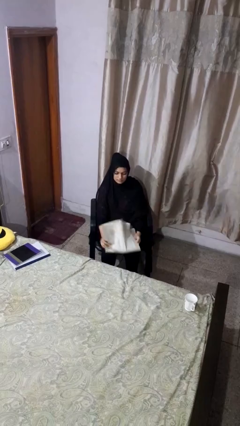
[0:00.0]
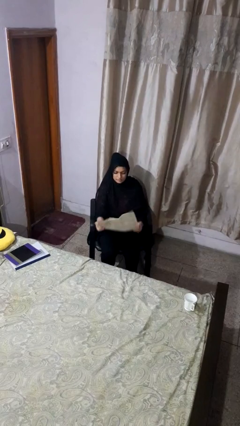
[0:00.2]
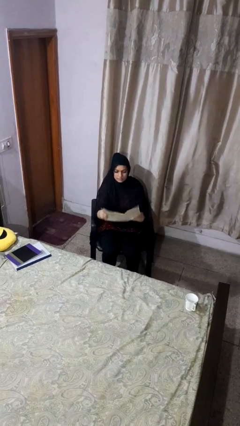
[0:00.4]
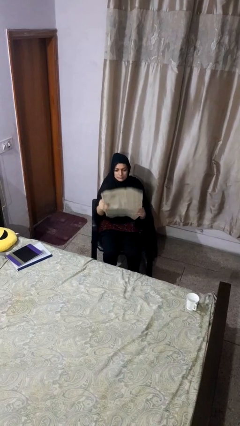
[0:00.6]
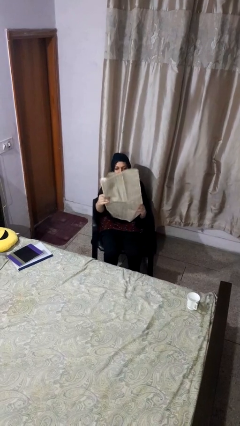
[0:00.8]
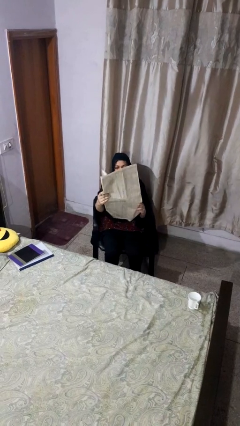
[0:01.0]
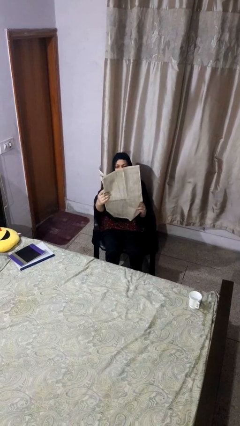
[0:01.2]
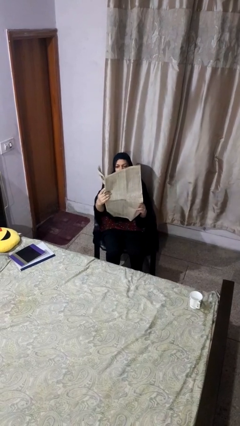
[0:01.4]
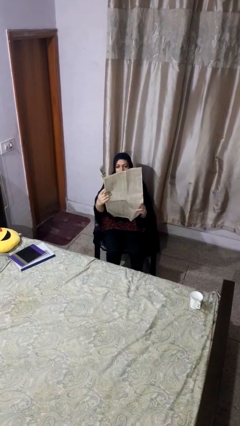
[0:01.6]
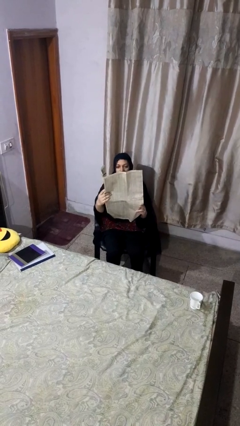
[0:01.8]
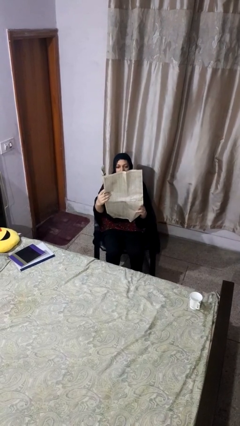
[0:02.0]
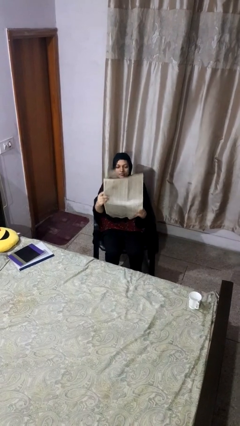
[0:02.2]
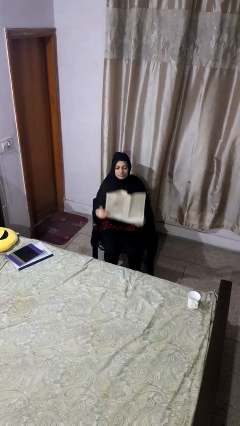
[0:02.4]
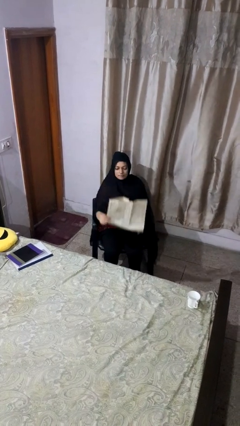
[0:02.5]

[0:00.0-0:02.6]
person reads newspaper

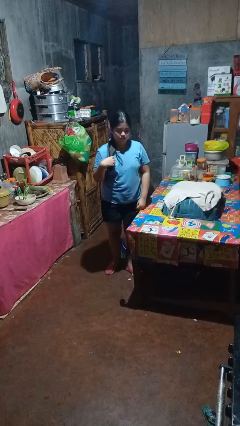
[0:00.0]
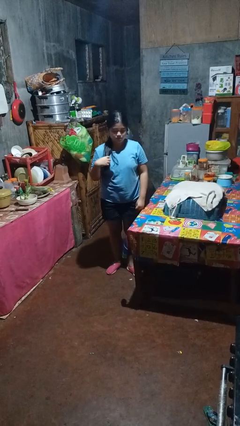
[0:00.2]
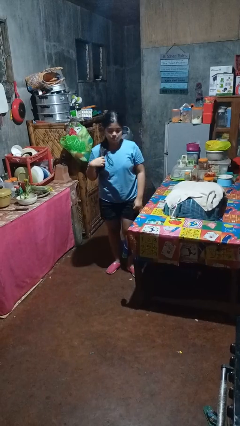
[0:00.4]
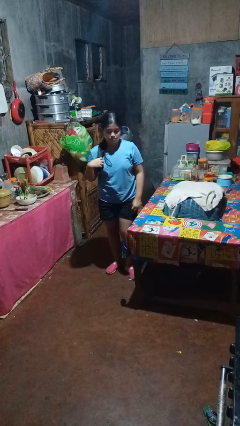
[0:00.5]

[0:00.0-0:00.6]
person bumps into table

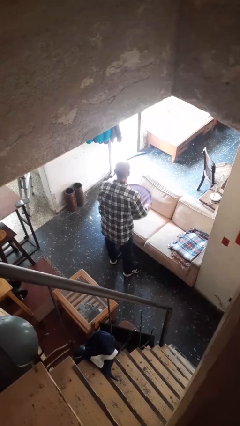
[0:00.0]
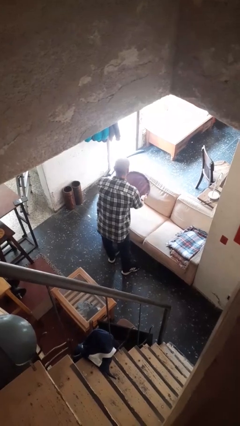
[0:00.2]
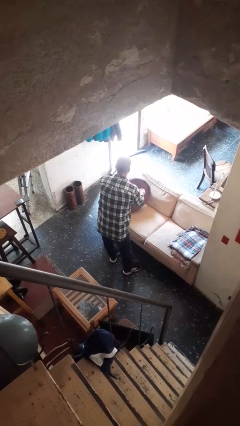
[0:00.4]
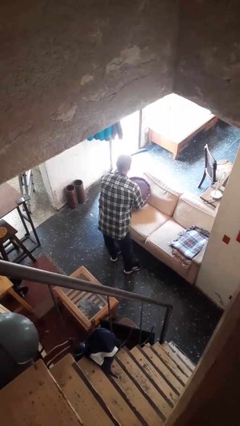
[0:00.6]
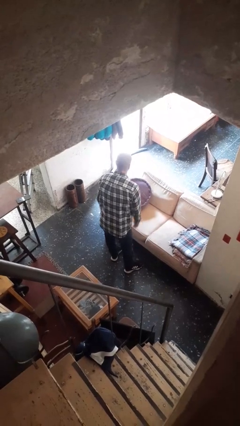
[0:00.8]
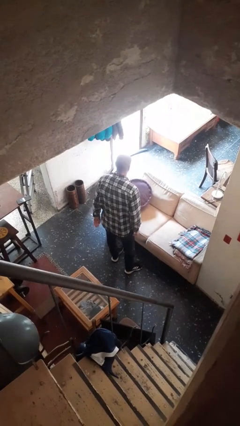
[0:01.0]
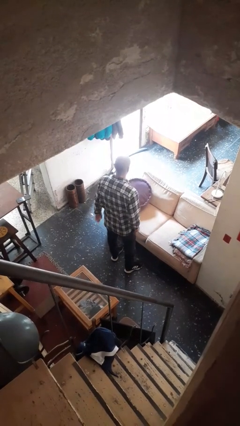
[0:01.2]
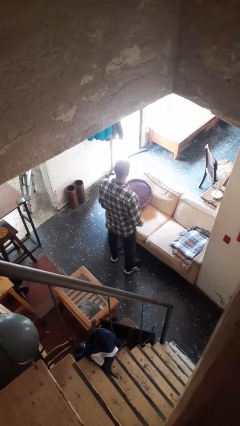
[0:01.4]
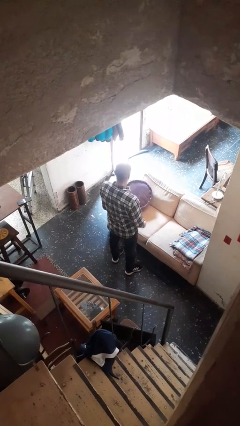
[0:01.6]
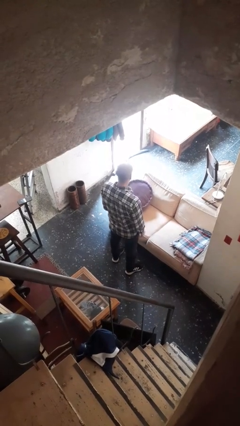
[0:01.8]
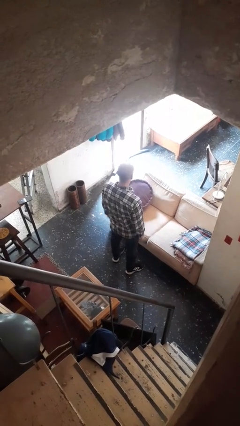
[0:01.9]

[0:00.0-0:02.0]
person puts down object on couch

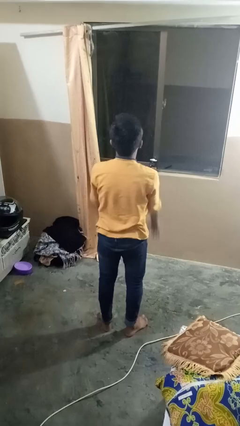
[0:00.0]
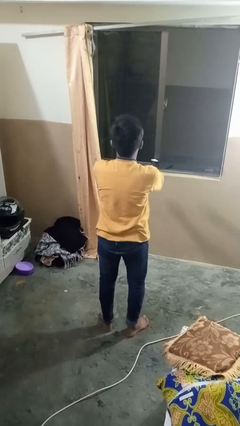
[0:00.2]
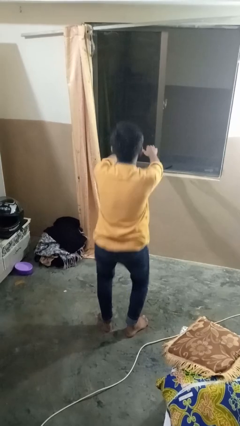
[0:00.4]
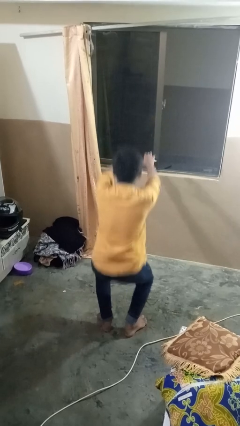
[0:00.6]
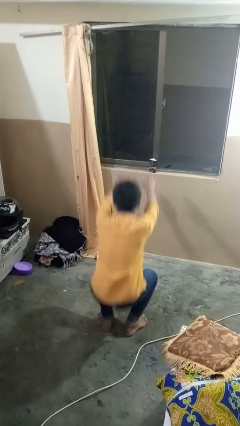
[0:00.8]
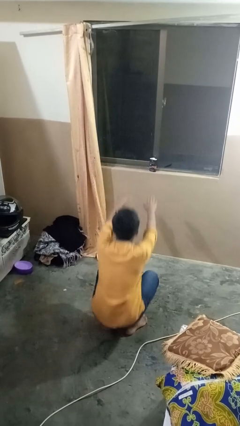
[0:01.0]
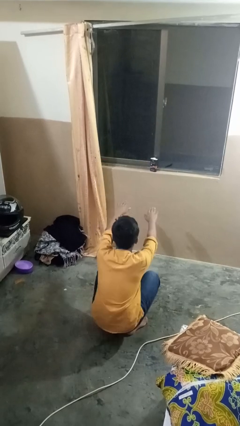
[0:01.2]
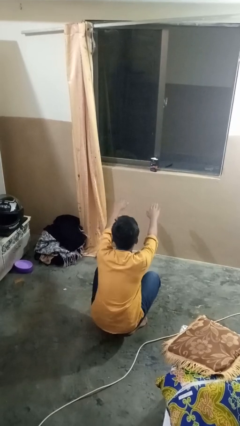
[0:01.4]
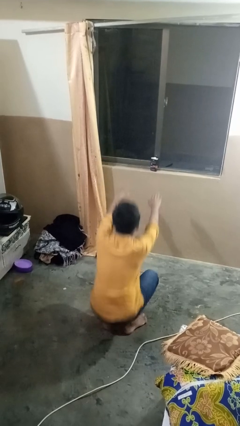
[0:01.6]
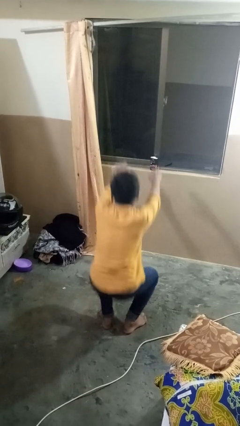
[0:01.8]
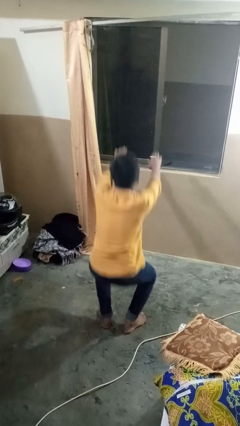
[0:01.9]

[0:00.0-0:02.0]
person squats

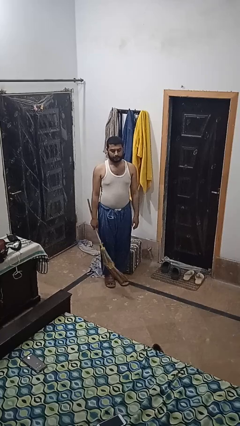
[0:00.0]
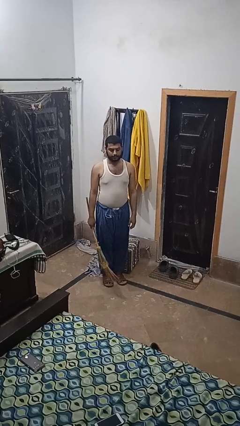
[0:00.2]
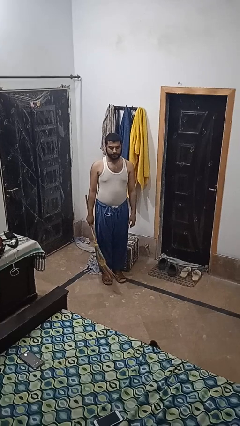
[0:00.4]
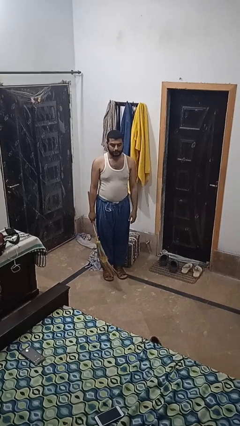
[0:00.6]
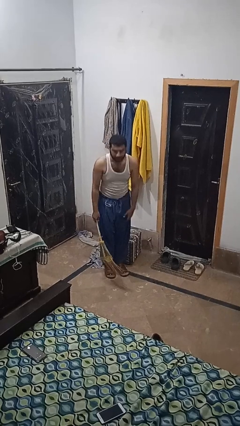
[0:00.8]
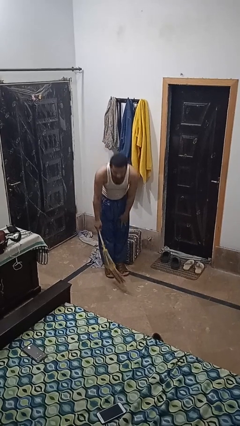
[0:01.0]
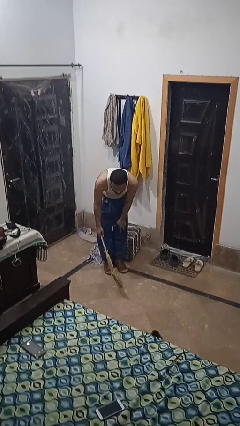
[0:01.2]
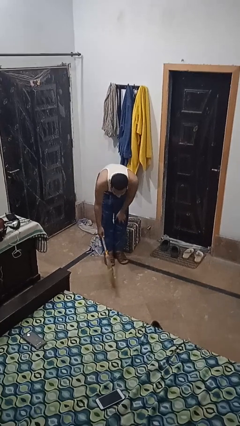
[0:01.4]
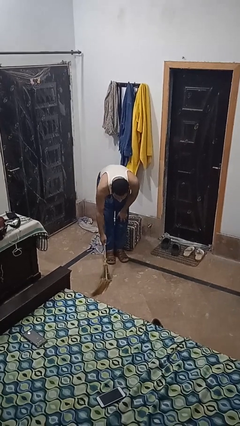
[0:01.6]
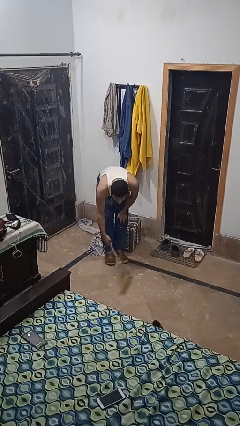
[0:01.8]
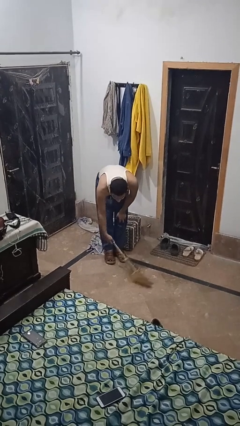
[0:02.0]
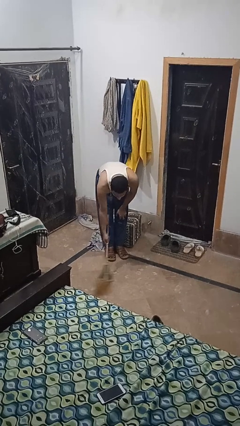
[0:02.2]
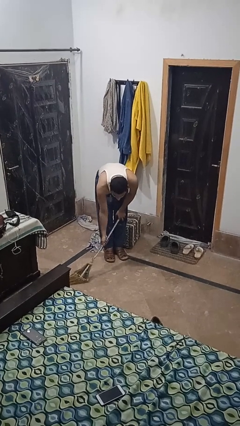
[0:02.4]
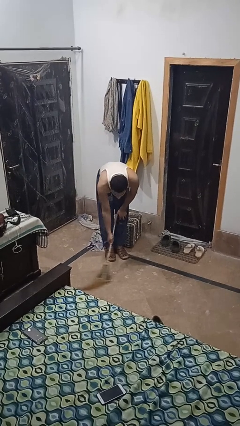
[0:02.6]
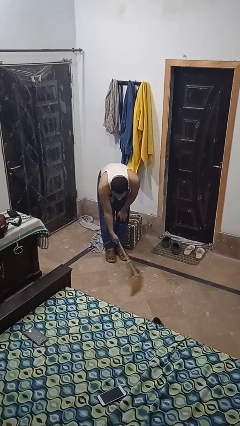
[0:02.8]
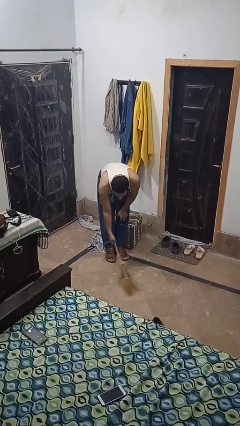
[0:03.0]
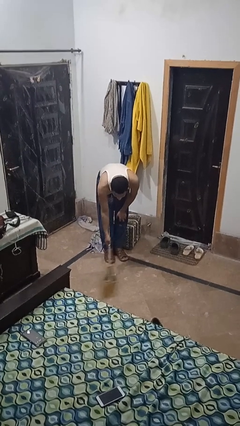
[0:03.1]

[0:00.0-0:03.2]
person sweeps floor

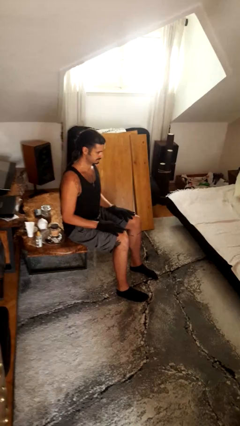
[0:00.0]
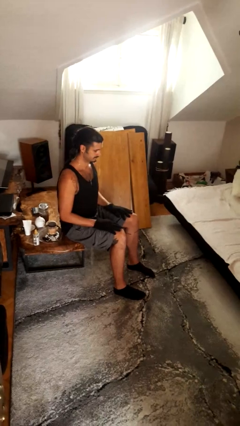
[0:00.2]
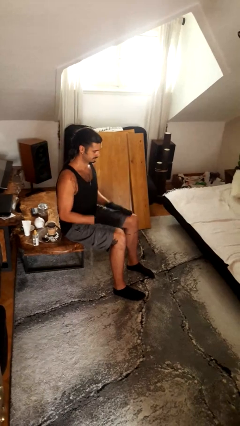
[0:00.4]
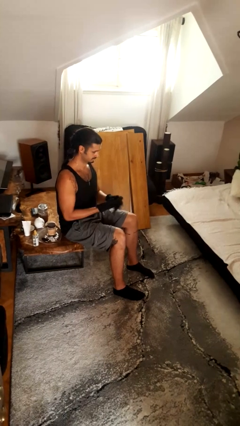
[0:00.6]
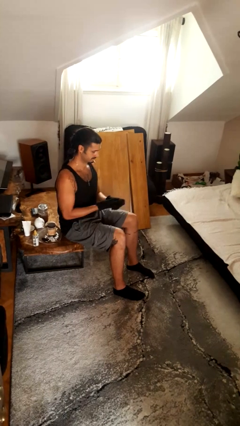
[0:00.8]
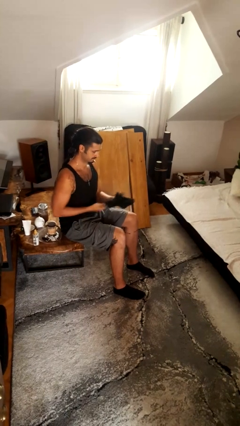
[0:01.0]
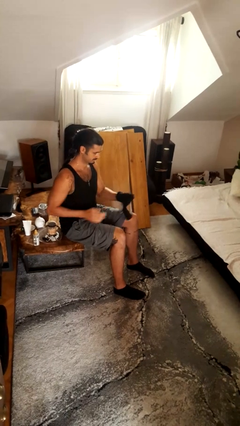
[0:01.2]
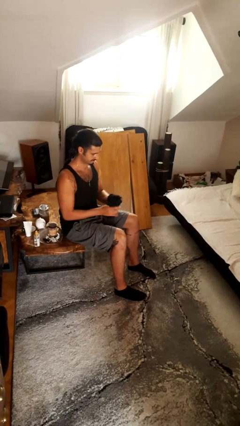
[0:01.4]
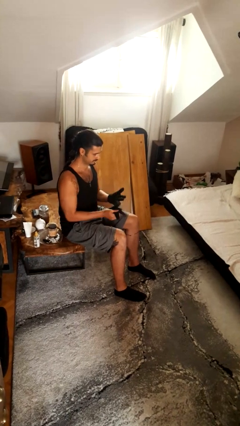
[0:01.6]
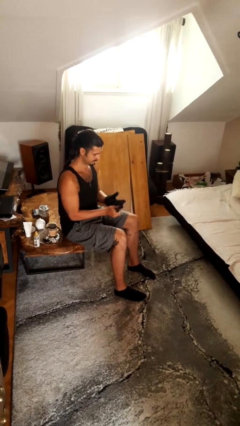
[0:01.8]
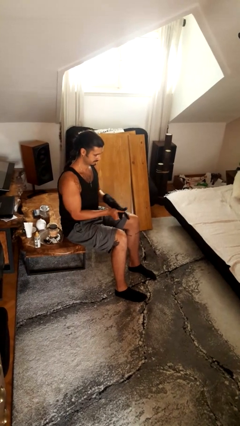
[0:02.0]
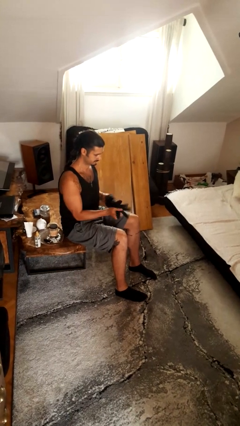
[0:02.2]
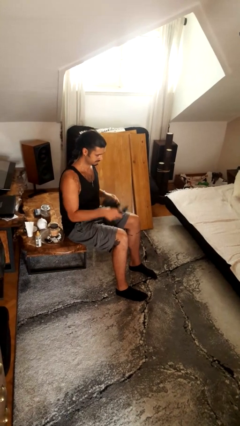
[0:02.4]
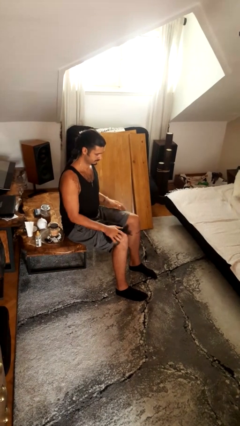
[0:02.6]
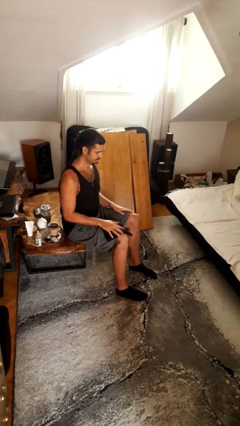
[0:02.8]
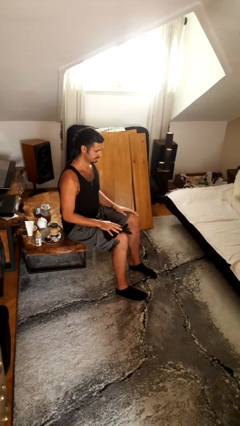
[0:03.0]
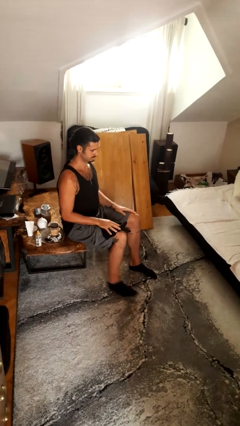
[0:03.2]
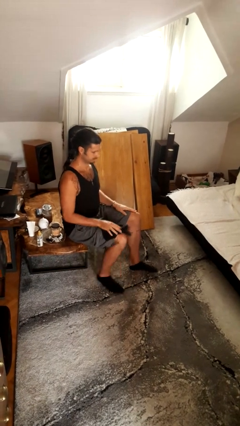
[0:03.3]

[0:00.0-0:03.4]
person takes off gloves

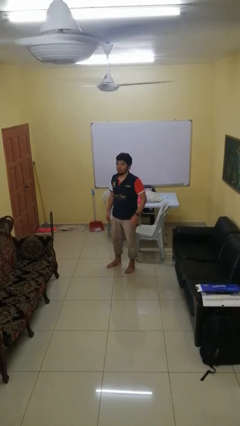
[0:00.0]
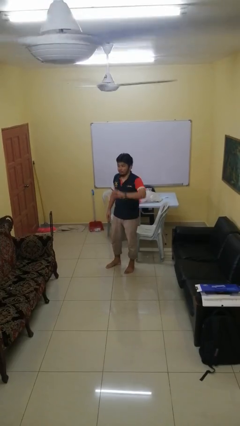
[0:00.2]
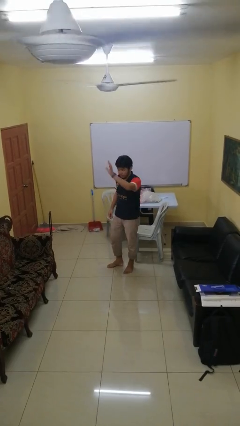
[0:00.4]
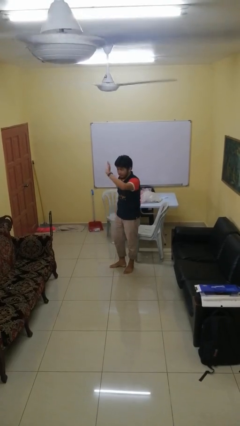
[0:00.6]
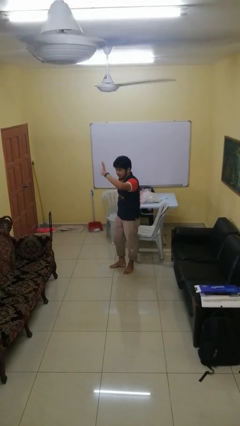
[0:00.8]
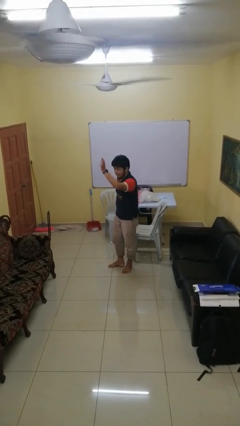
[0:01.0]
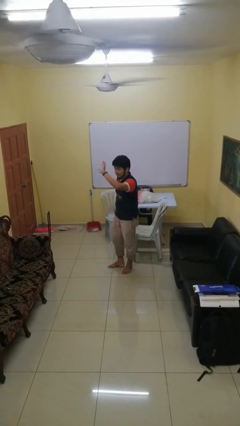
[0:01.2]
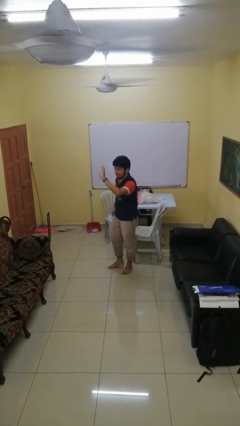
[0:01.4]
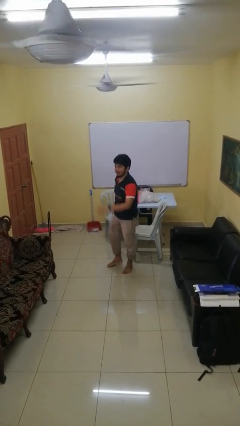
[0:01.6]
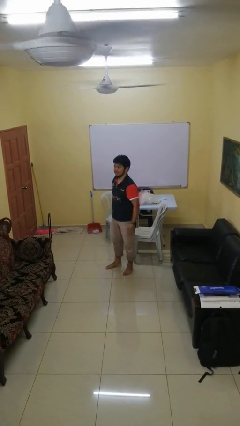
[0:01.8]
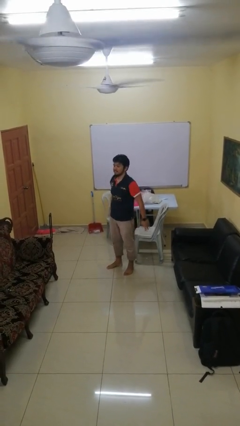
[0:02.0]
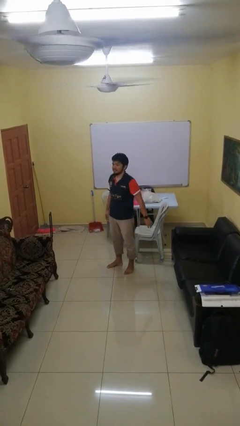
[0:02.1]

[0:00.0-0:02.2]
person waves at person

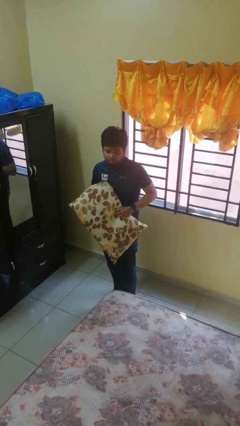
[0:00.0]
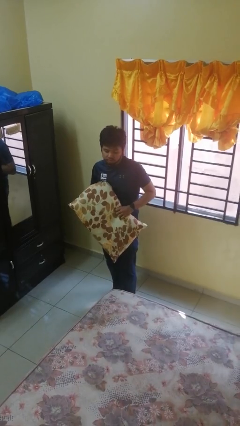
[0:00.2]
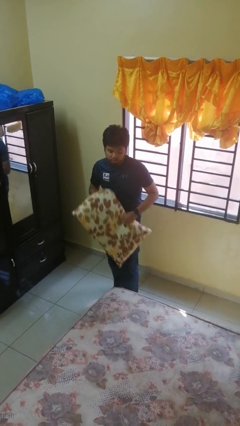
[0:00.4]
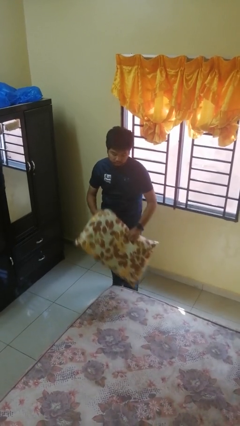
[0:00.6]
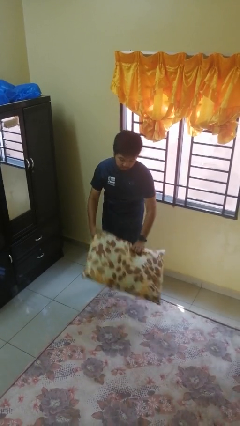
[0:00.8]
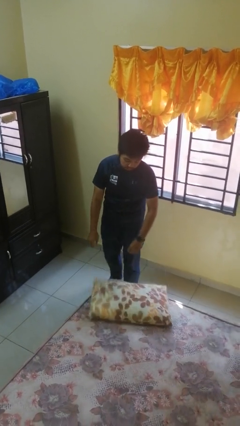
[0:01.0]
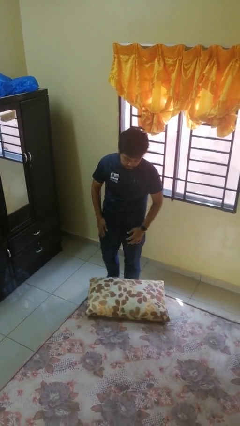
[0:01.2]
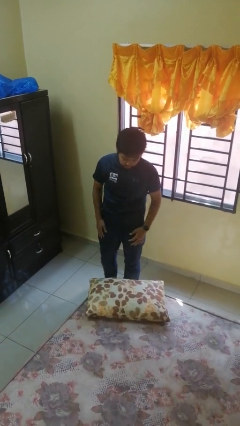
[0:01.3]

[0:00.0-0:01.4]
person puts down object on bed
